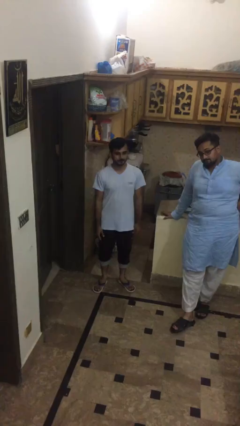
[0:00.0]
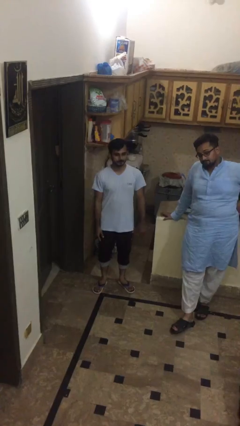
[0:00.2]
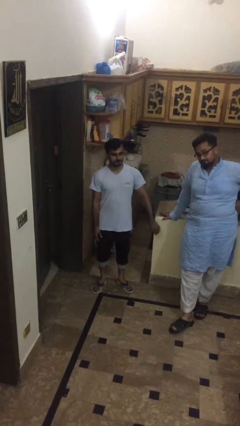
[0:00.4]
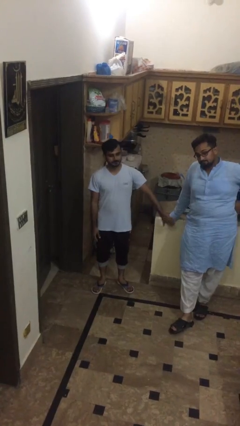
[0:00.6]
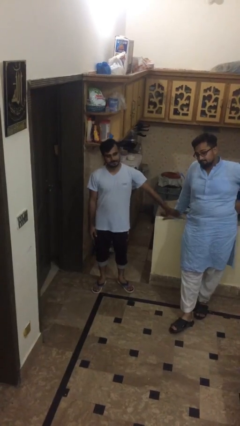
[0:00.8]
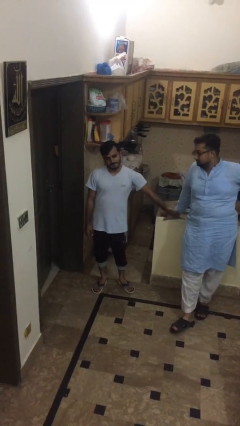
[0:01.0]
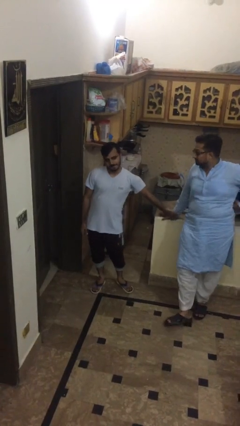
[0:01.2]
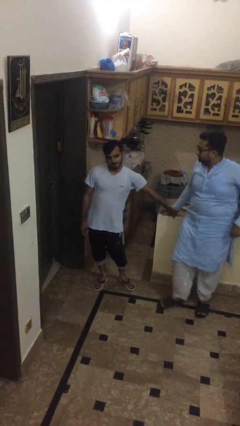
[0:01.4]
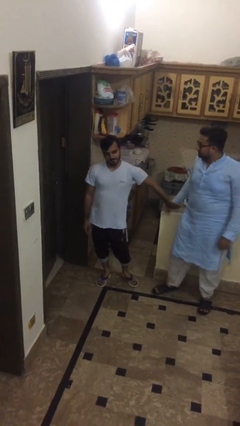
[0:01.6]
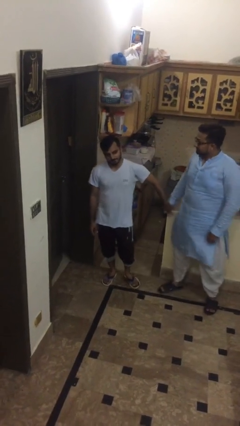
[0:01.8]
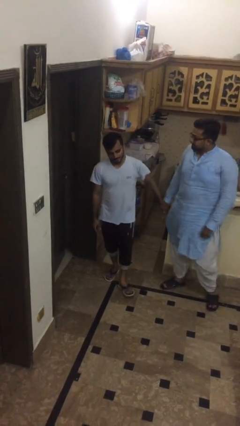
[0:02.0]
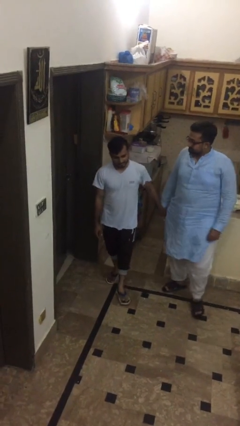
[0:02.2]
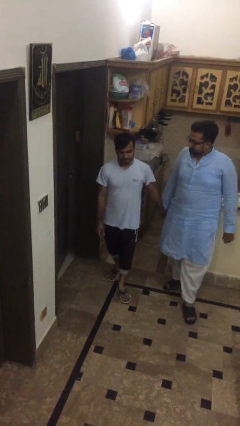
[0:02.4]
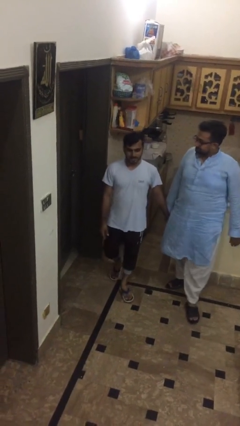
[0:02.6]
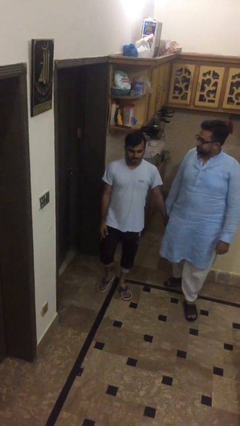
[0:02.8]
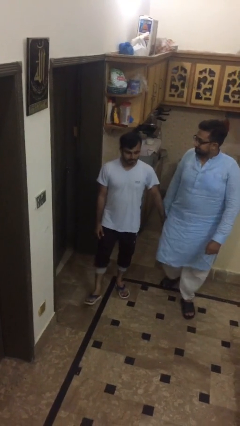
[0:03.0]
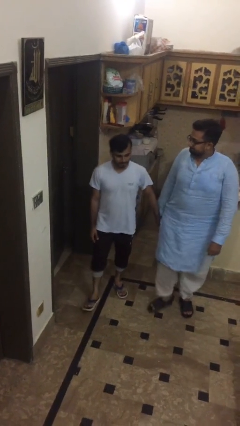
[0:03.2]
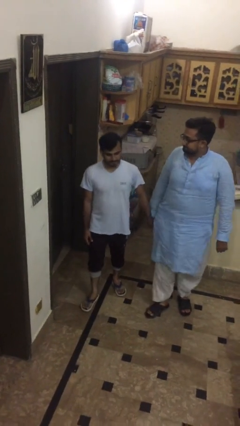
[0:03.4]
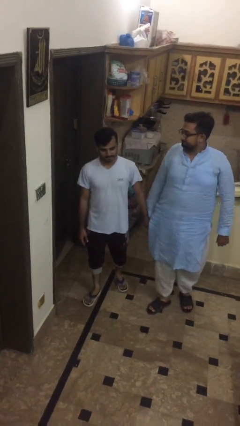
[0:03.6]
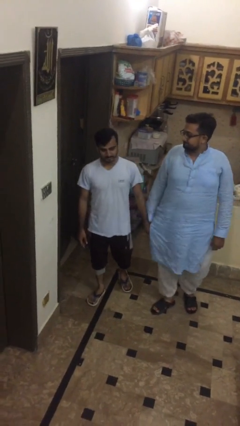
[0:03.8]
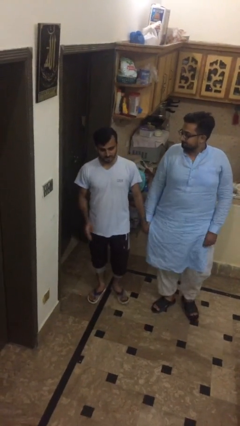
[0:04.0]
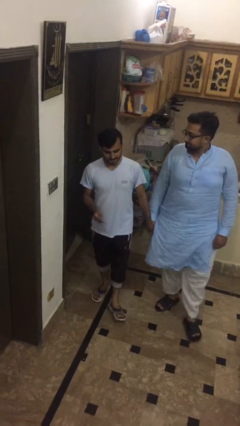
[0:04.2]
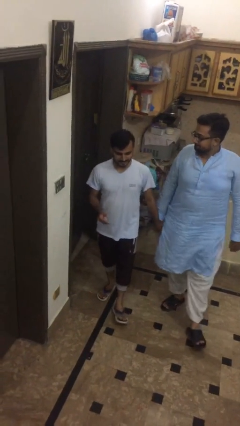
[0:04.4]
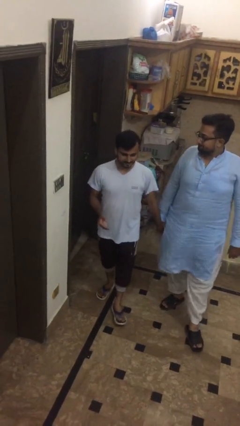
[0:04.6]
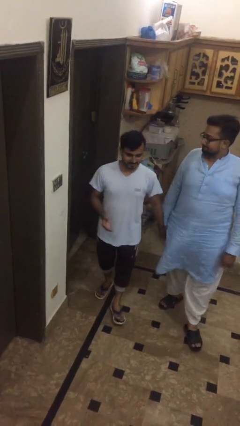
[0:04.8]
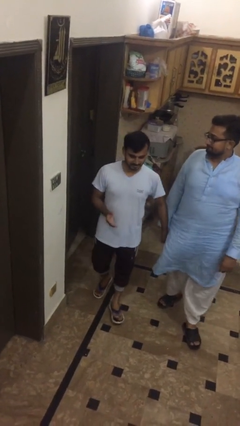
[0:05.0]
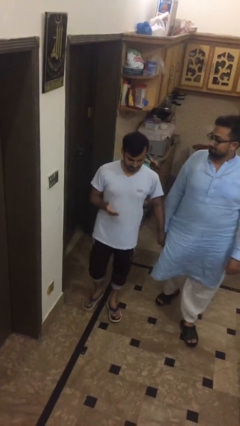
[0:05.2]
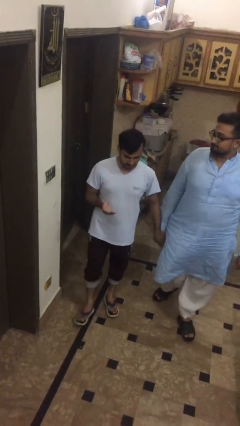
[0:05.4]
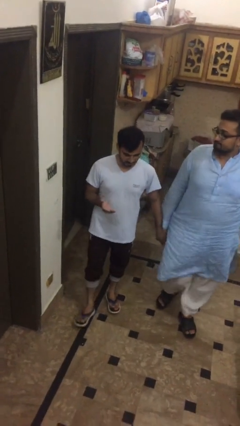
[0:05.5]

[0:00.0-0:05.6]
person holds hand

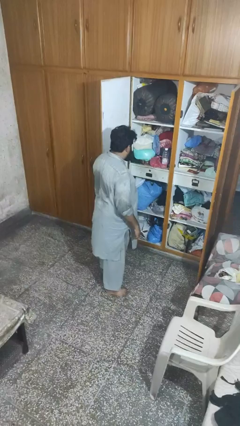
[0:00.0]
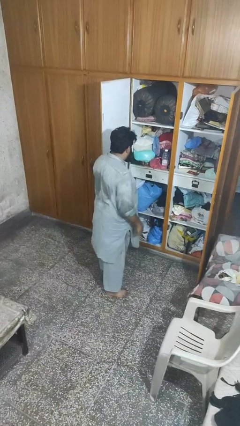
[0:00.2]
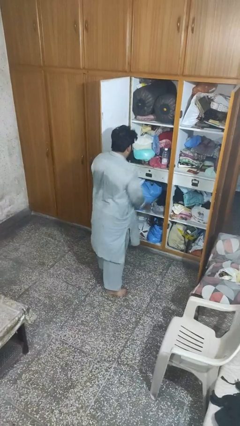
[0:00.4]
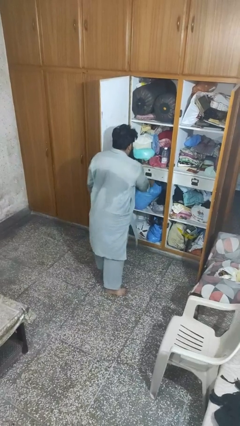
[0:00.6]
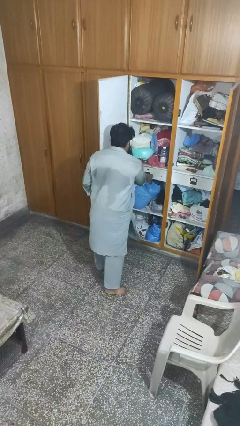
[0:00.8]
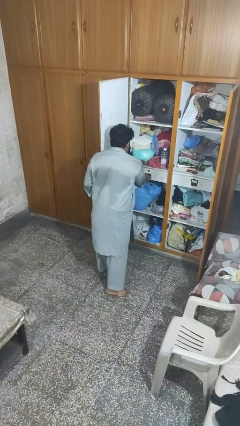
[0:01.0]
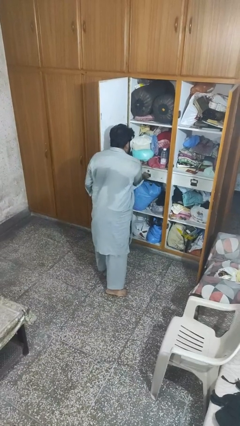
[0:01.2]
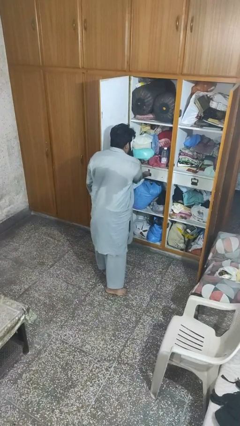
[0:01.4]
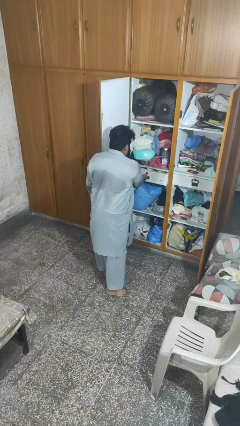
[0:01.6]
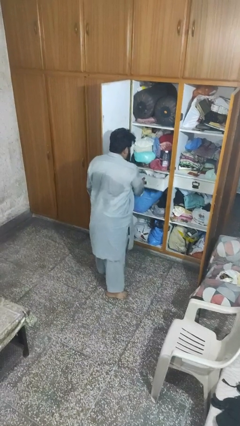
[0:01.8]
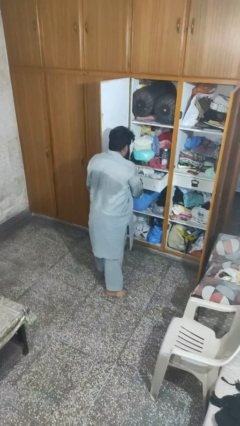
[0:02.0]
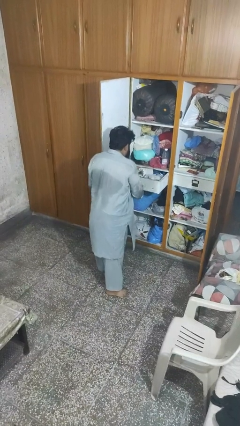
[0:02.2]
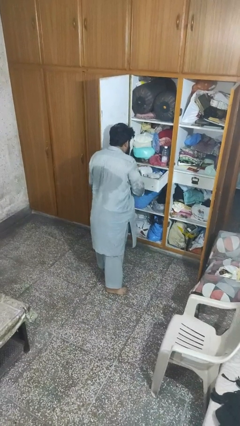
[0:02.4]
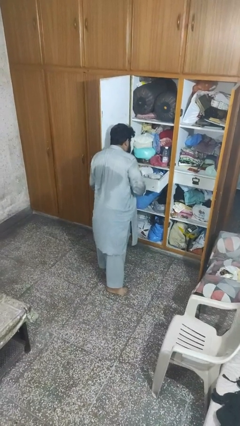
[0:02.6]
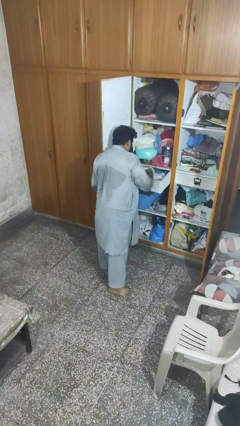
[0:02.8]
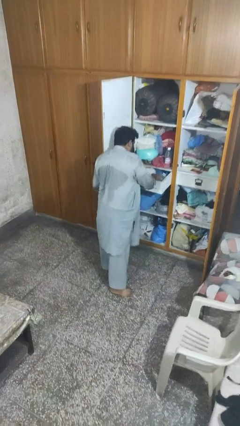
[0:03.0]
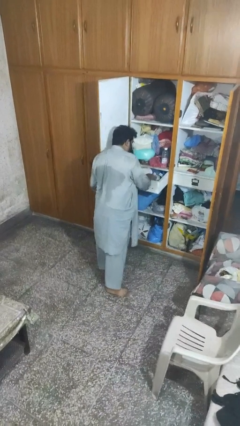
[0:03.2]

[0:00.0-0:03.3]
person opens dresser drawer

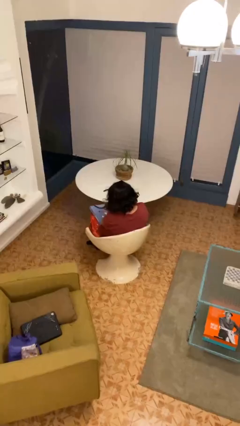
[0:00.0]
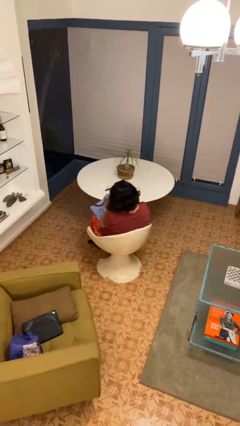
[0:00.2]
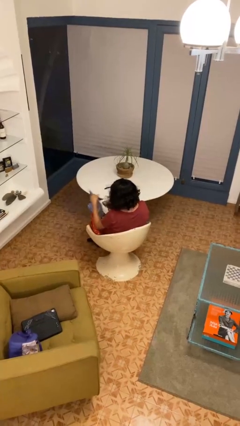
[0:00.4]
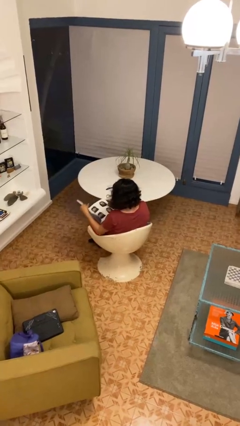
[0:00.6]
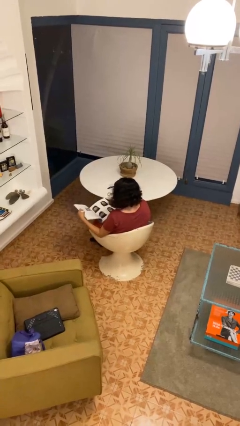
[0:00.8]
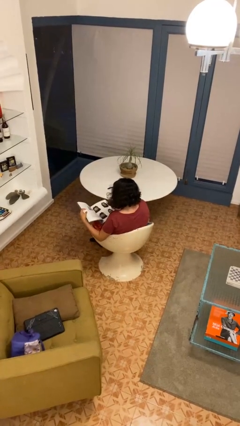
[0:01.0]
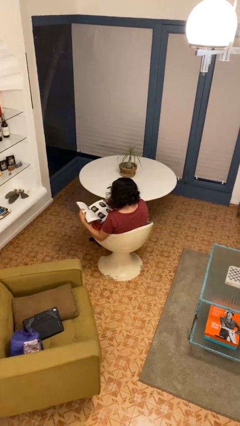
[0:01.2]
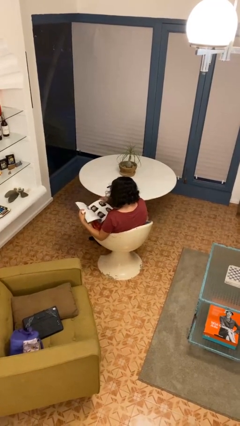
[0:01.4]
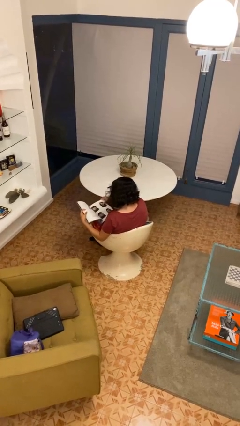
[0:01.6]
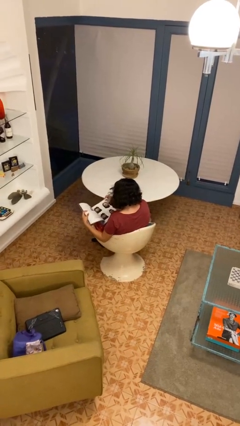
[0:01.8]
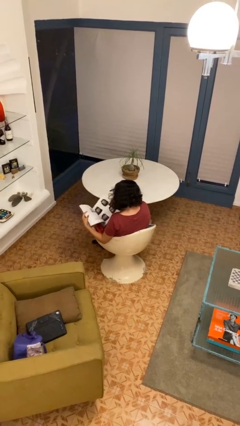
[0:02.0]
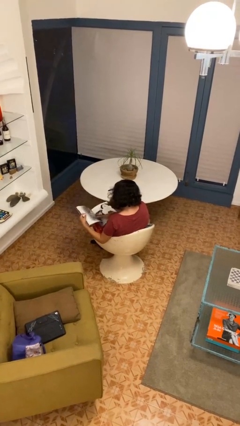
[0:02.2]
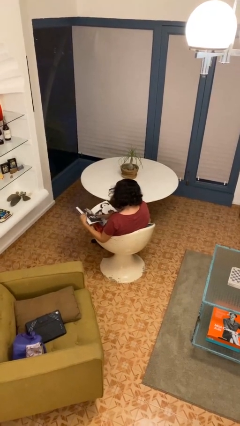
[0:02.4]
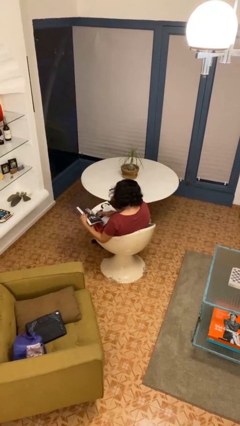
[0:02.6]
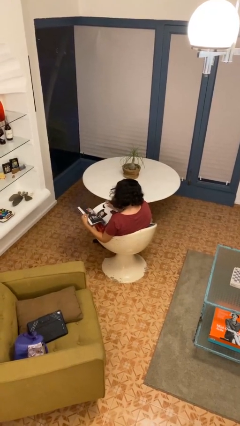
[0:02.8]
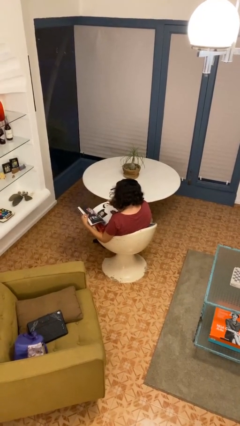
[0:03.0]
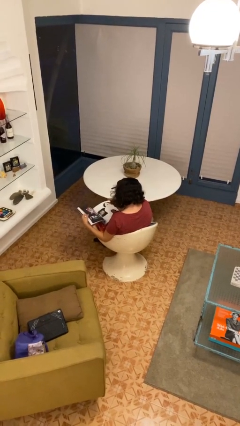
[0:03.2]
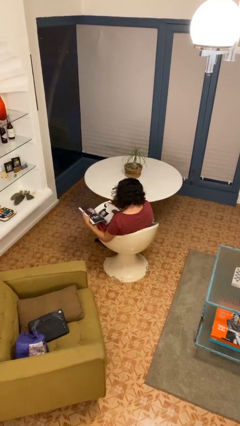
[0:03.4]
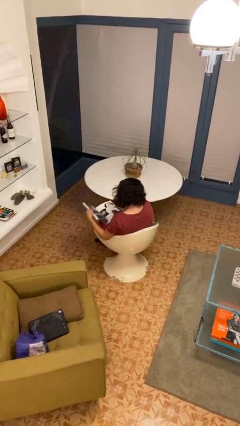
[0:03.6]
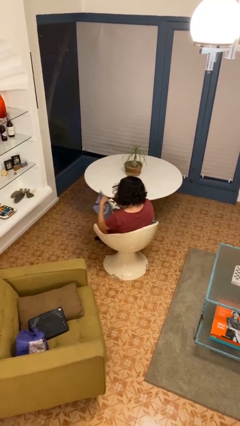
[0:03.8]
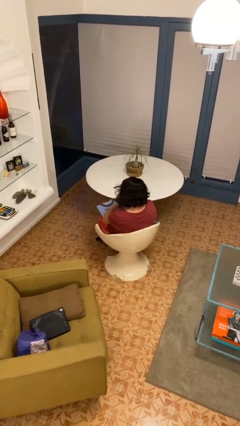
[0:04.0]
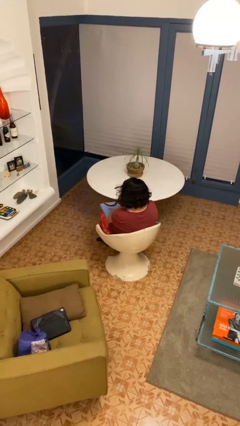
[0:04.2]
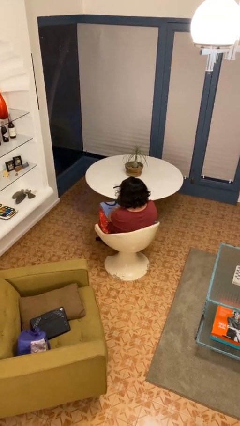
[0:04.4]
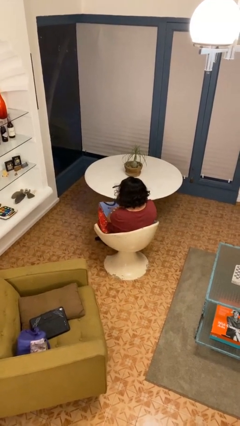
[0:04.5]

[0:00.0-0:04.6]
person reads book

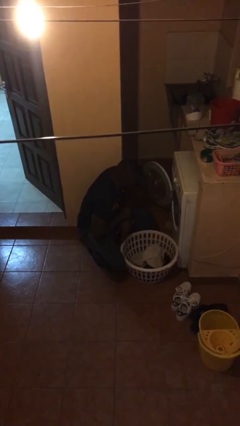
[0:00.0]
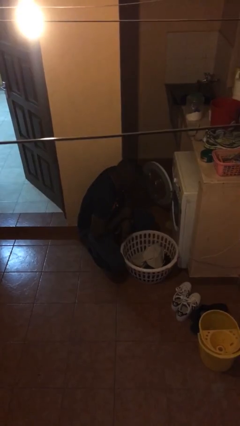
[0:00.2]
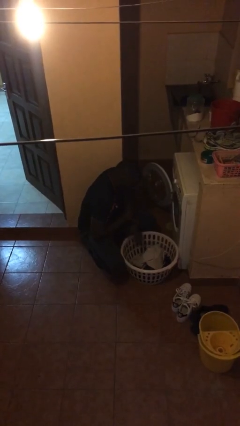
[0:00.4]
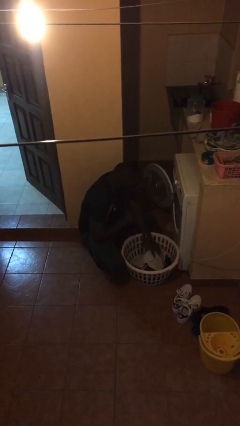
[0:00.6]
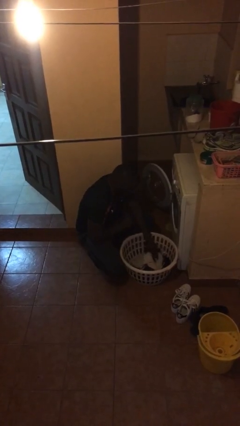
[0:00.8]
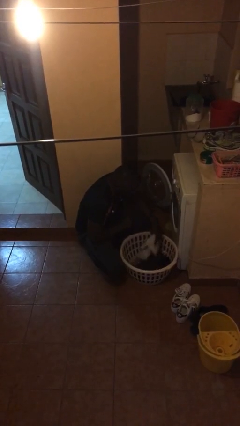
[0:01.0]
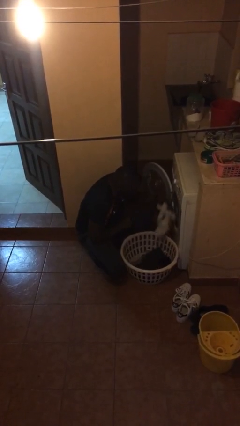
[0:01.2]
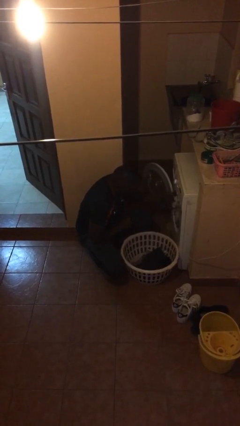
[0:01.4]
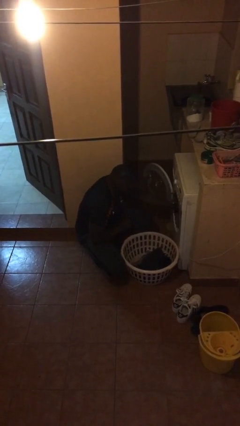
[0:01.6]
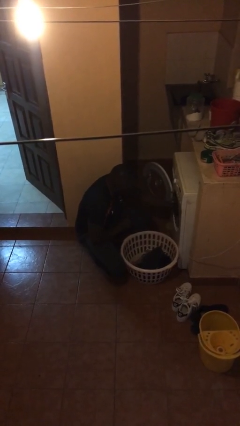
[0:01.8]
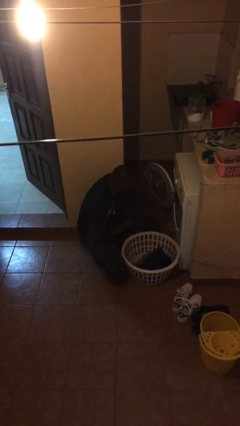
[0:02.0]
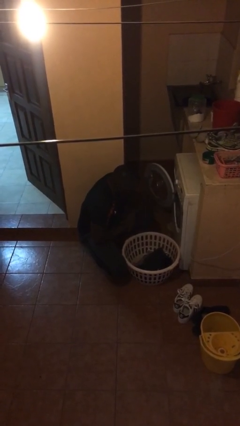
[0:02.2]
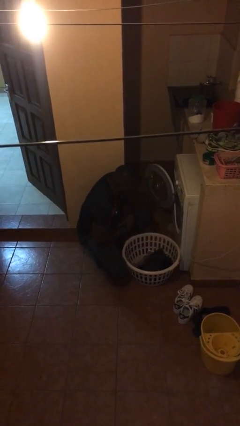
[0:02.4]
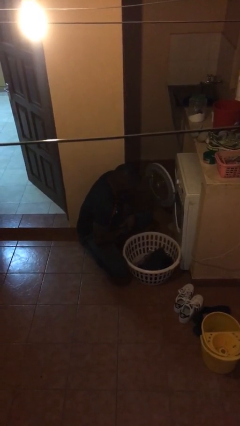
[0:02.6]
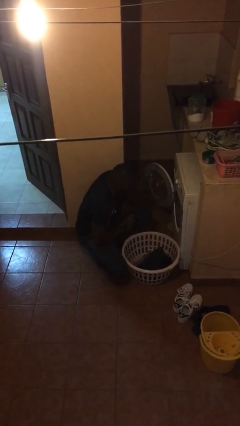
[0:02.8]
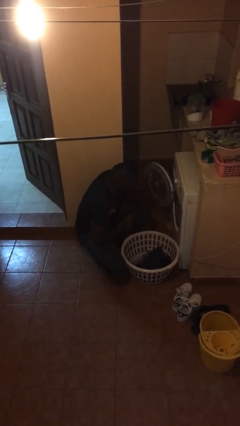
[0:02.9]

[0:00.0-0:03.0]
person loads clotheswasher

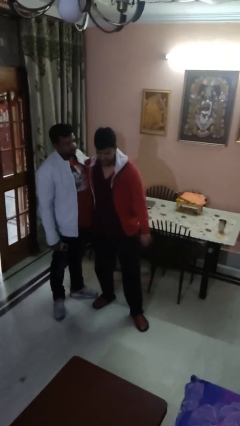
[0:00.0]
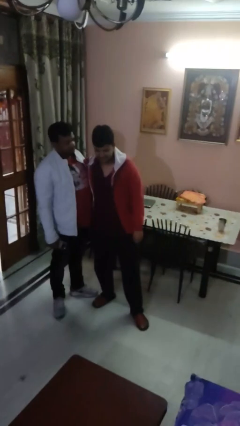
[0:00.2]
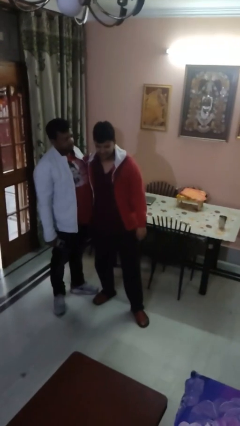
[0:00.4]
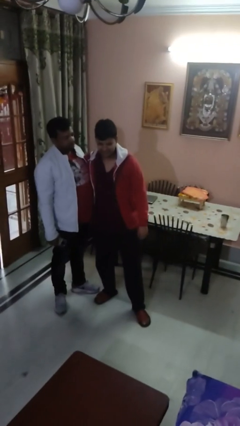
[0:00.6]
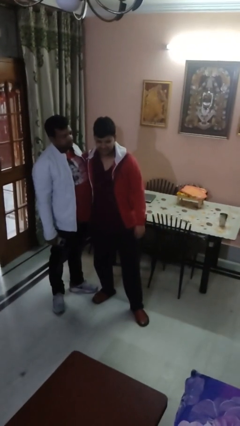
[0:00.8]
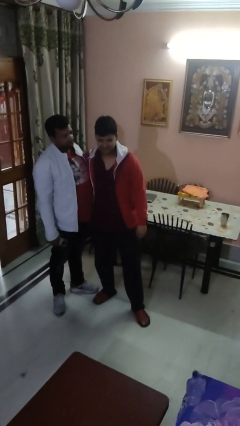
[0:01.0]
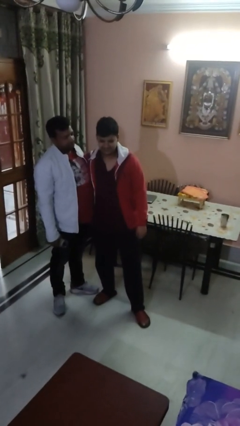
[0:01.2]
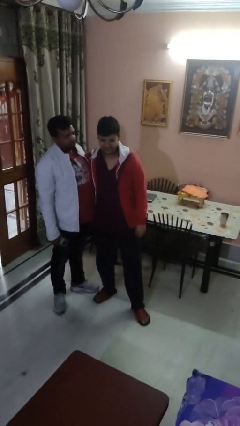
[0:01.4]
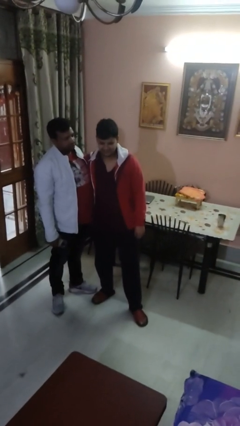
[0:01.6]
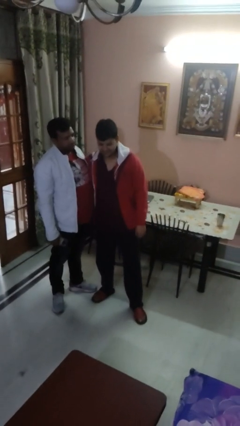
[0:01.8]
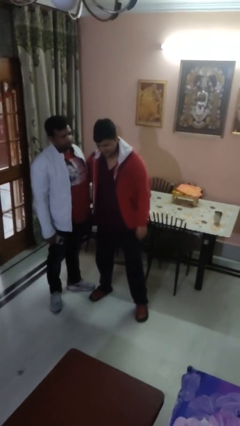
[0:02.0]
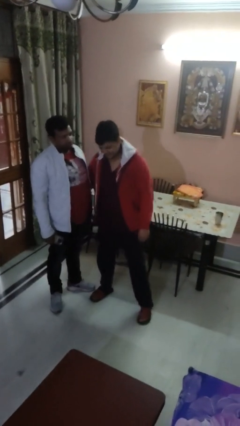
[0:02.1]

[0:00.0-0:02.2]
person hugs person from side
